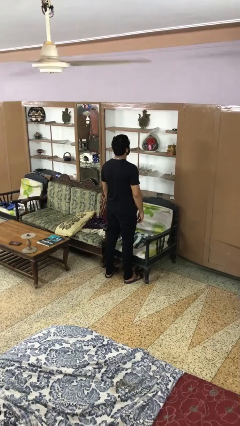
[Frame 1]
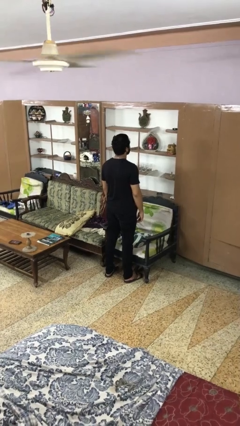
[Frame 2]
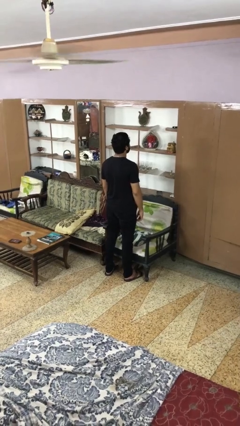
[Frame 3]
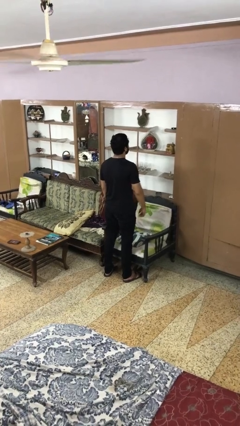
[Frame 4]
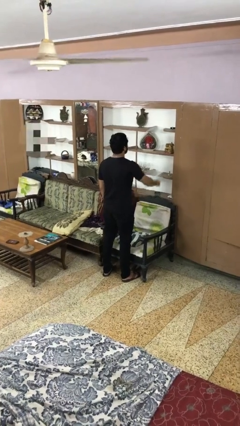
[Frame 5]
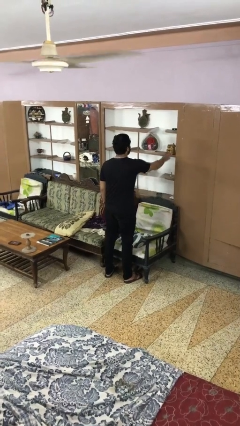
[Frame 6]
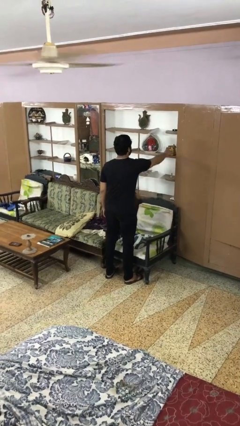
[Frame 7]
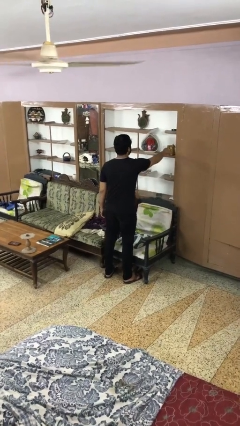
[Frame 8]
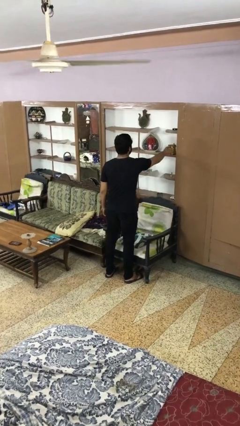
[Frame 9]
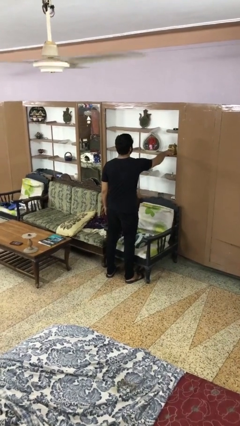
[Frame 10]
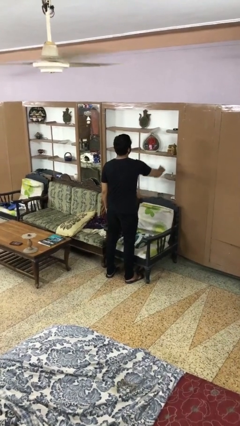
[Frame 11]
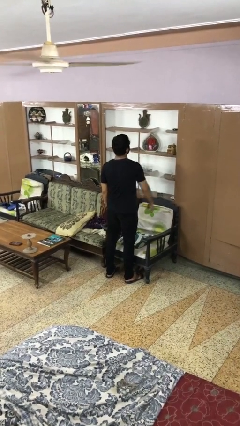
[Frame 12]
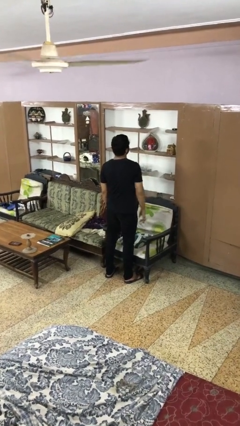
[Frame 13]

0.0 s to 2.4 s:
person taps object with finger

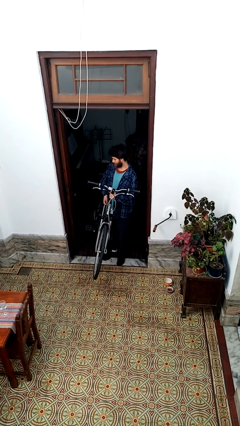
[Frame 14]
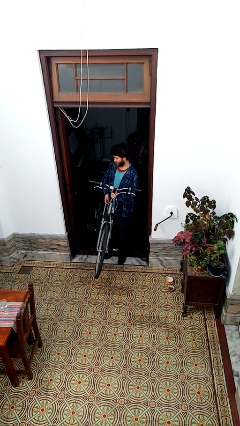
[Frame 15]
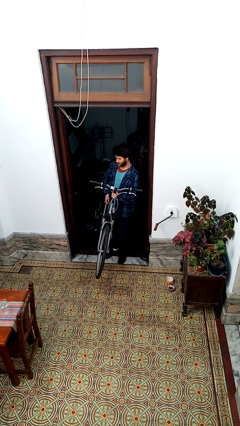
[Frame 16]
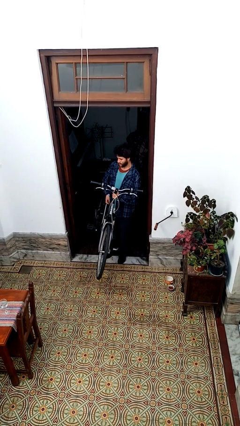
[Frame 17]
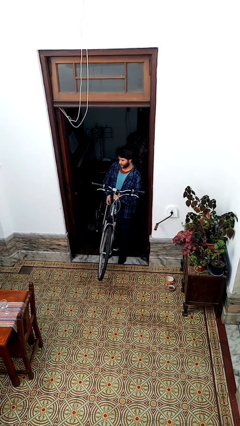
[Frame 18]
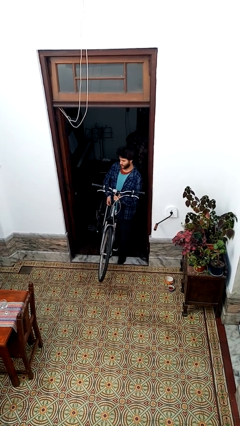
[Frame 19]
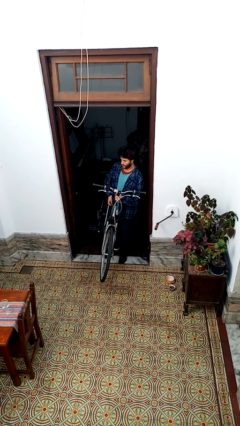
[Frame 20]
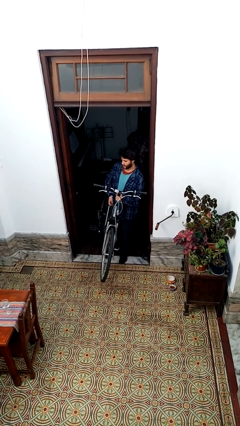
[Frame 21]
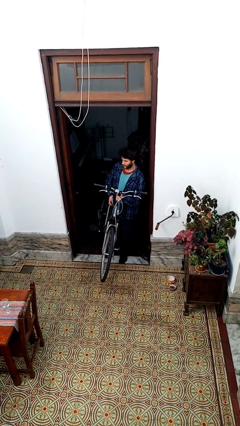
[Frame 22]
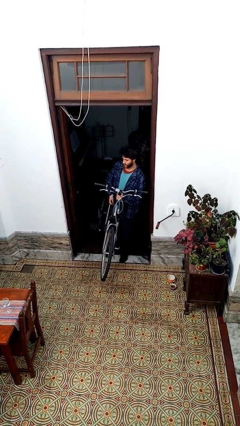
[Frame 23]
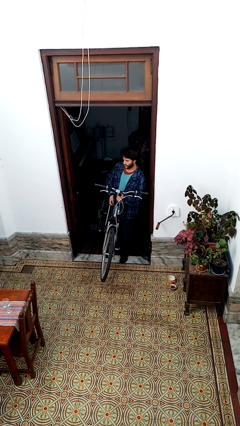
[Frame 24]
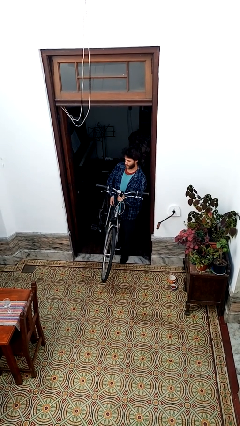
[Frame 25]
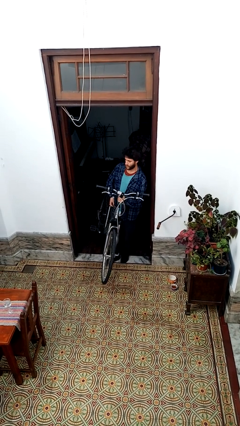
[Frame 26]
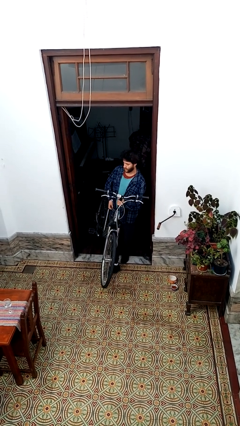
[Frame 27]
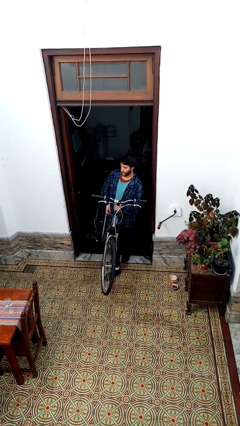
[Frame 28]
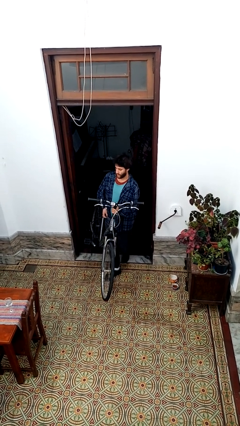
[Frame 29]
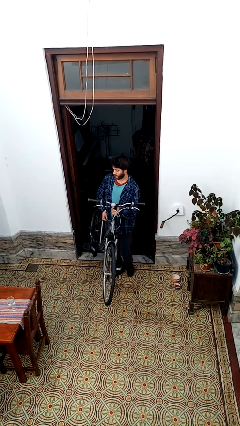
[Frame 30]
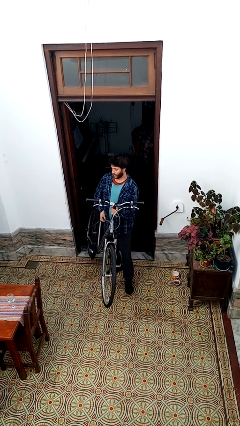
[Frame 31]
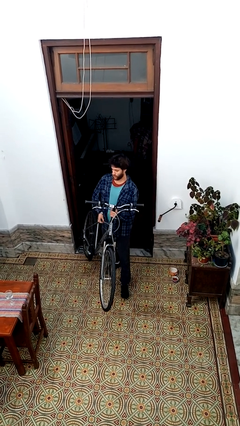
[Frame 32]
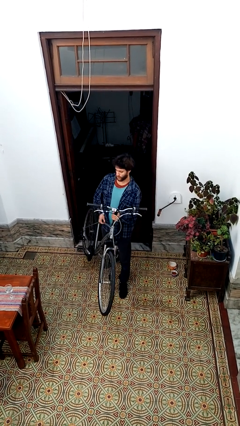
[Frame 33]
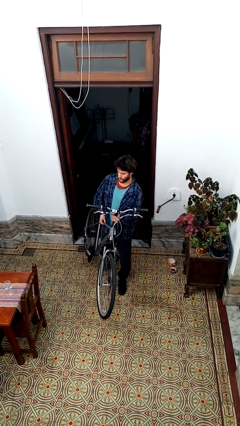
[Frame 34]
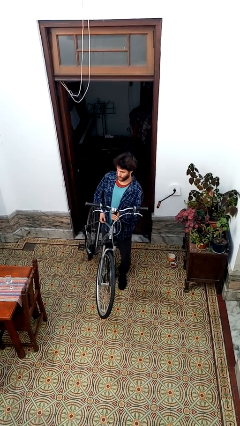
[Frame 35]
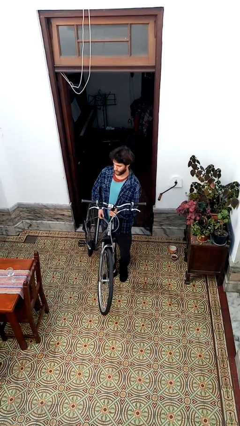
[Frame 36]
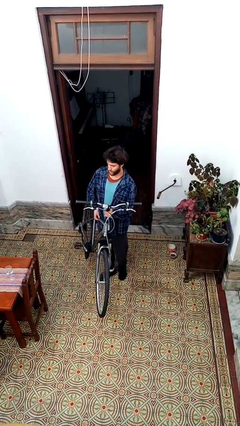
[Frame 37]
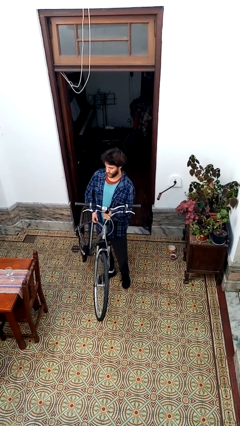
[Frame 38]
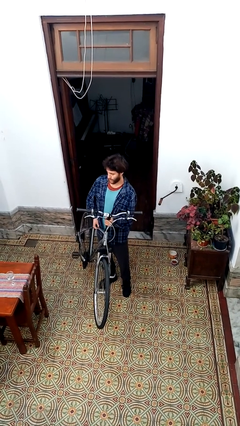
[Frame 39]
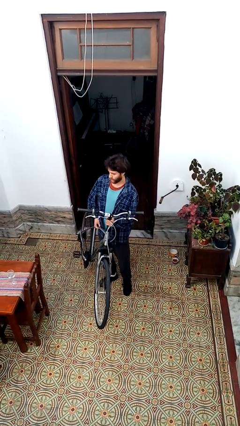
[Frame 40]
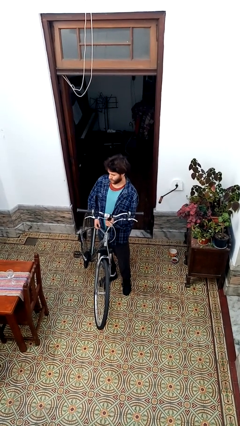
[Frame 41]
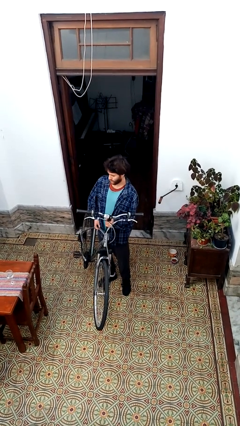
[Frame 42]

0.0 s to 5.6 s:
person carries bicycle

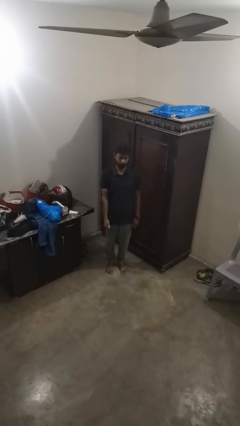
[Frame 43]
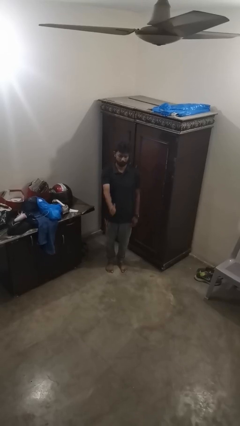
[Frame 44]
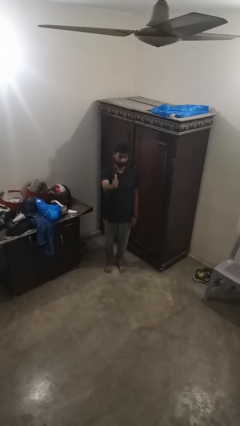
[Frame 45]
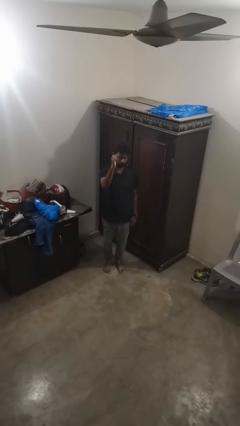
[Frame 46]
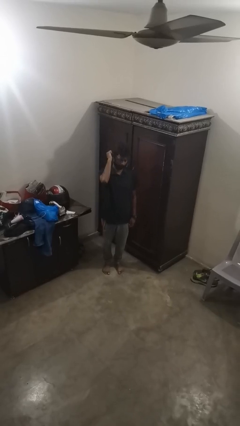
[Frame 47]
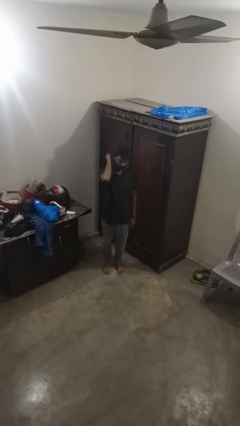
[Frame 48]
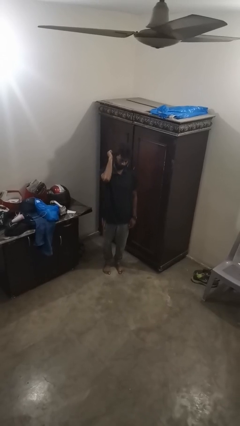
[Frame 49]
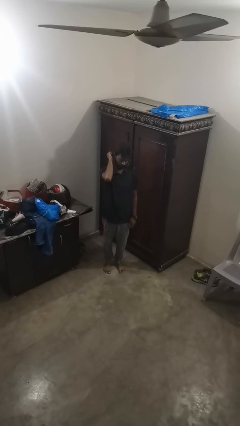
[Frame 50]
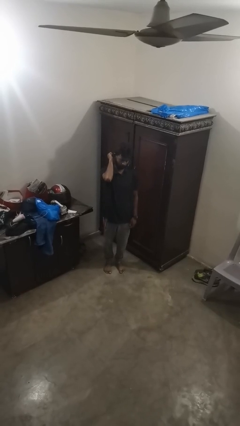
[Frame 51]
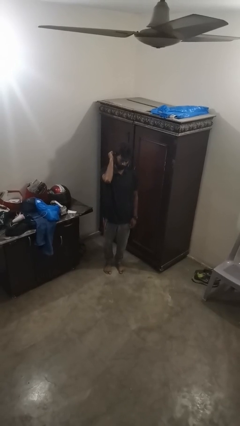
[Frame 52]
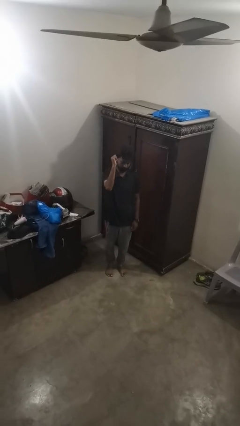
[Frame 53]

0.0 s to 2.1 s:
person gestures behind me

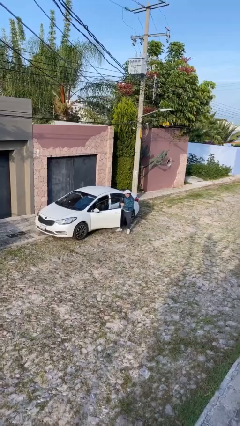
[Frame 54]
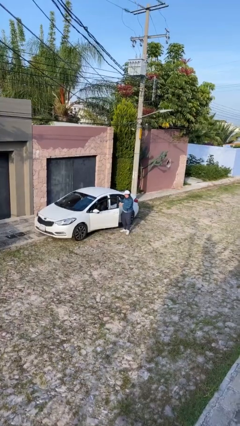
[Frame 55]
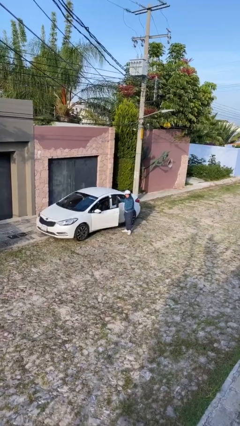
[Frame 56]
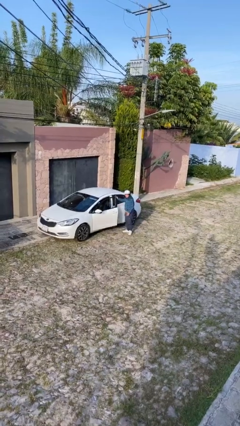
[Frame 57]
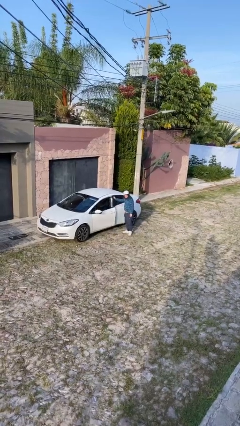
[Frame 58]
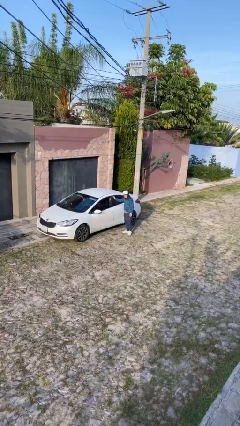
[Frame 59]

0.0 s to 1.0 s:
person closes car door

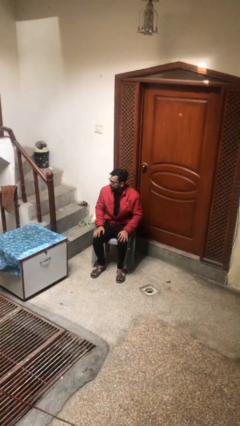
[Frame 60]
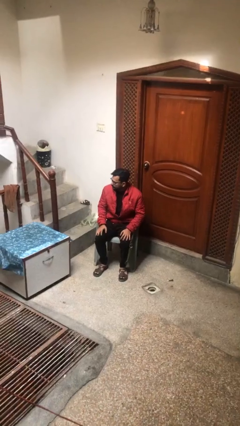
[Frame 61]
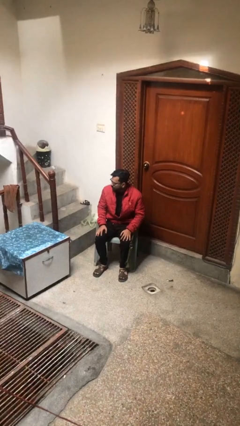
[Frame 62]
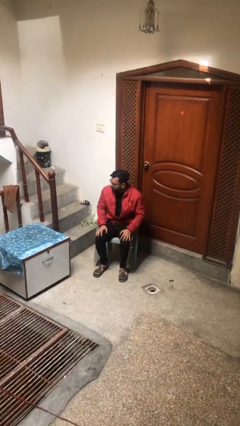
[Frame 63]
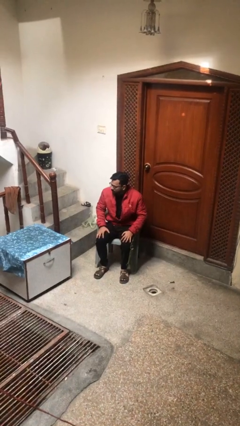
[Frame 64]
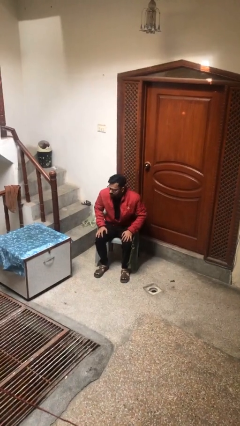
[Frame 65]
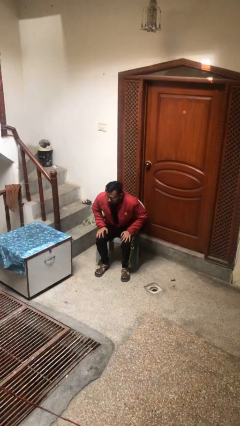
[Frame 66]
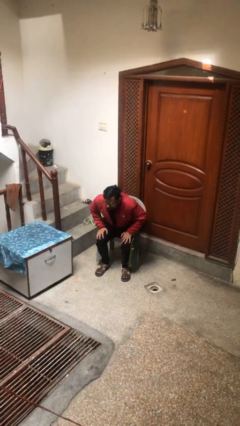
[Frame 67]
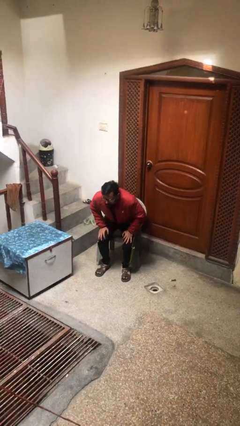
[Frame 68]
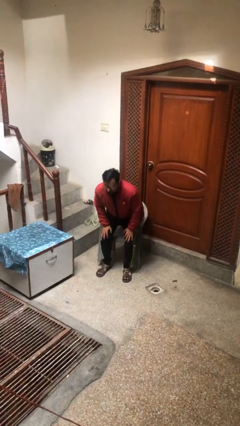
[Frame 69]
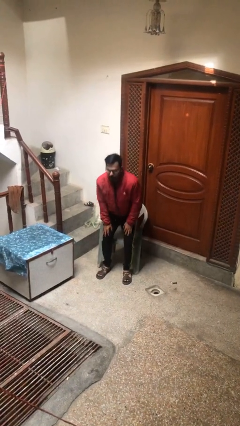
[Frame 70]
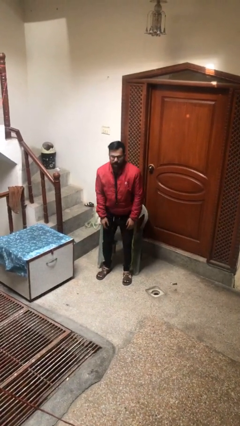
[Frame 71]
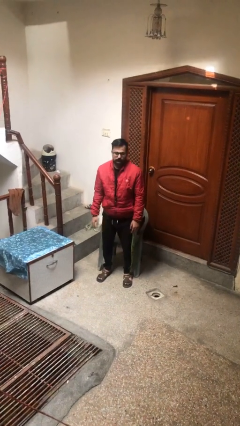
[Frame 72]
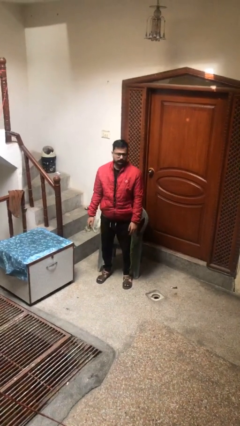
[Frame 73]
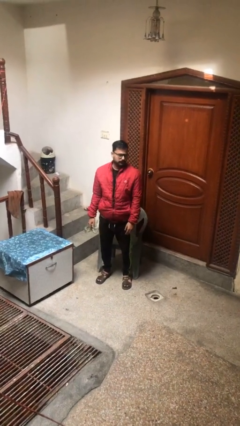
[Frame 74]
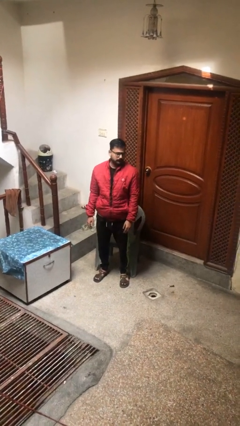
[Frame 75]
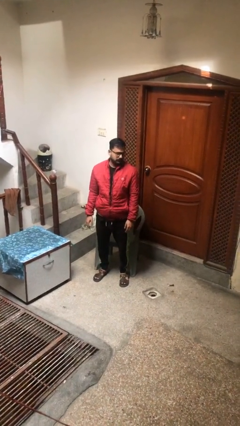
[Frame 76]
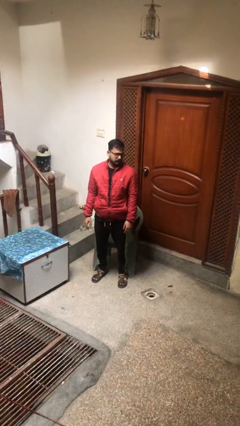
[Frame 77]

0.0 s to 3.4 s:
person stands up

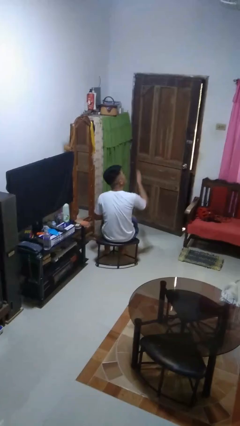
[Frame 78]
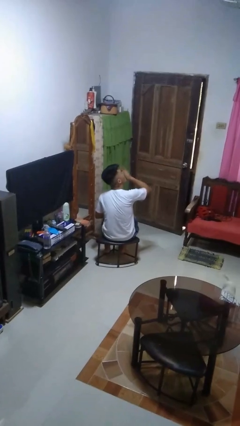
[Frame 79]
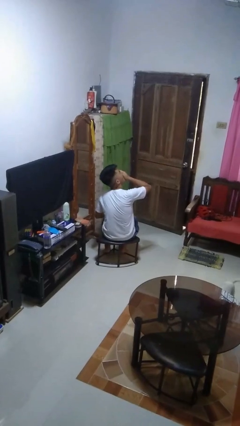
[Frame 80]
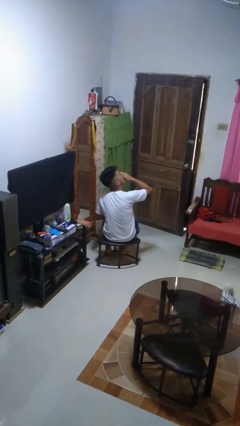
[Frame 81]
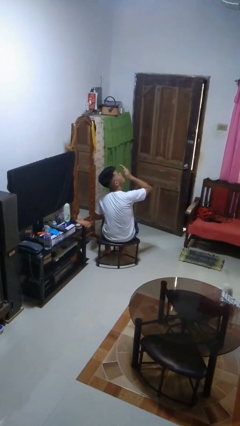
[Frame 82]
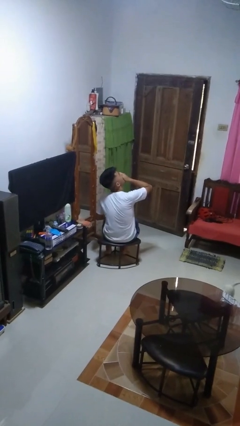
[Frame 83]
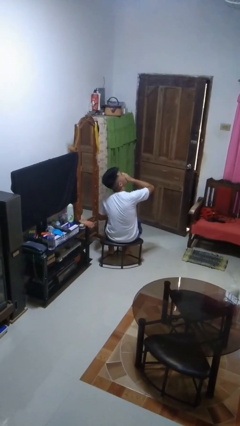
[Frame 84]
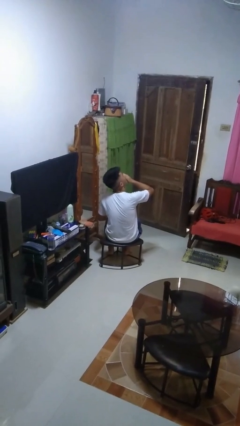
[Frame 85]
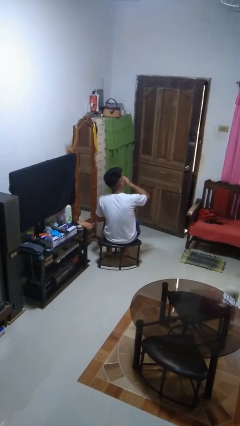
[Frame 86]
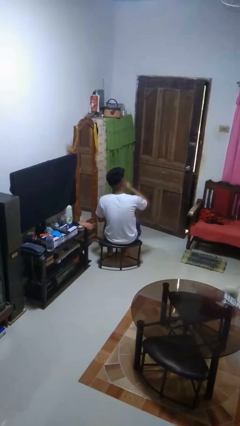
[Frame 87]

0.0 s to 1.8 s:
person yawns

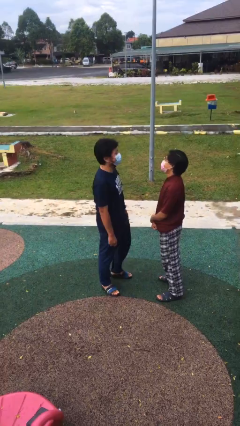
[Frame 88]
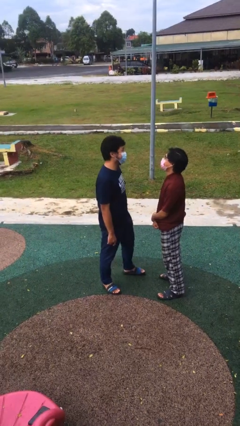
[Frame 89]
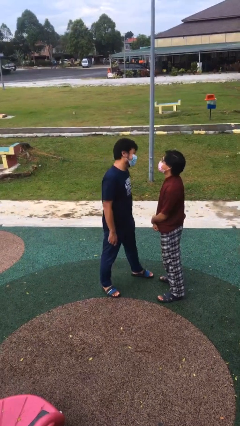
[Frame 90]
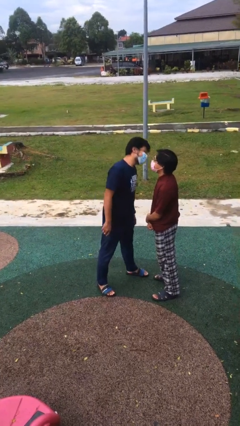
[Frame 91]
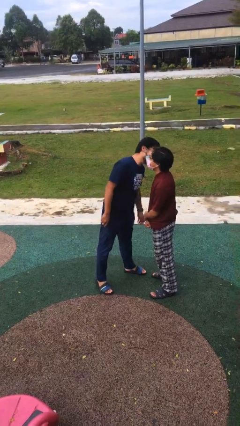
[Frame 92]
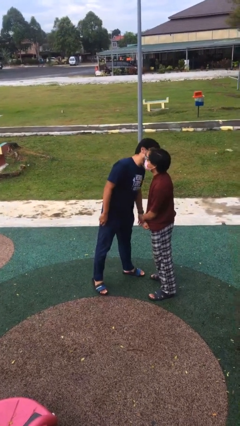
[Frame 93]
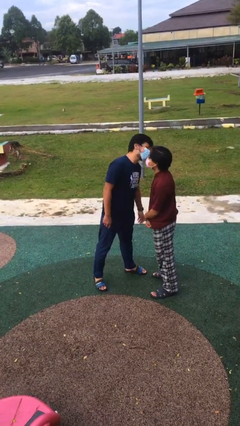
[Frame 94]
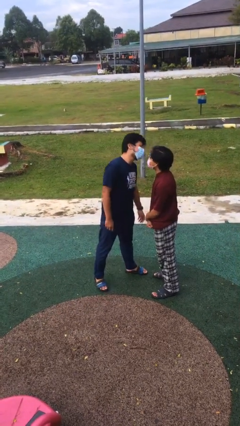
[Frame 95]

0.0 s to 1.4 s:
person kisses cheek of person
